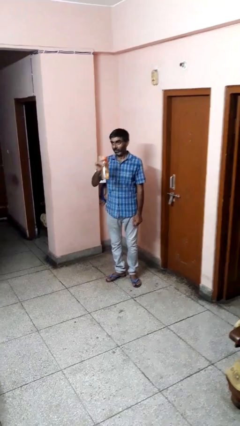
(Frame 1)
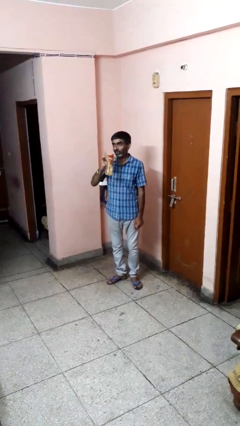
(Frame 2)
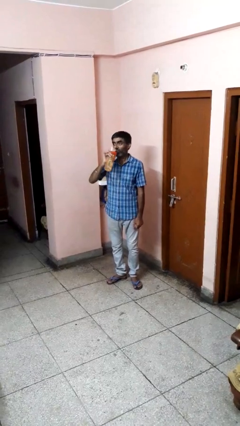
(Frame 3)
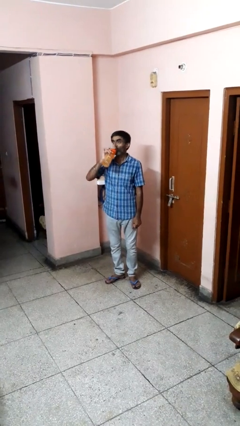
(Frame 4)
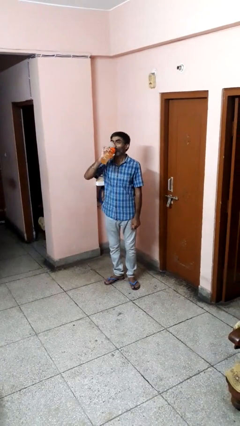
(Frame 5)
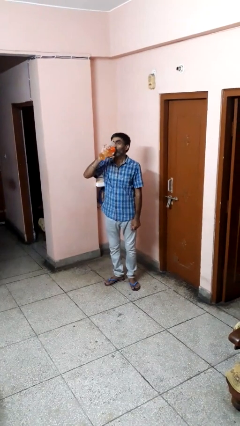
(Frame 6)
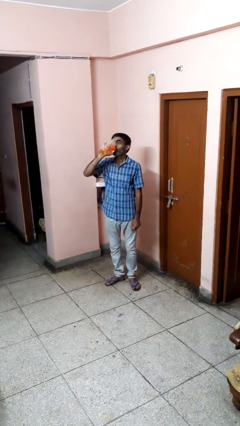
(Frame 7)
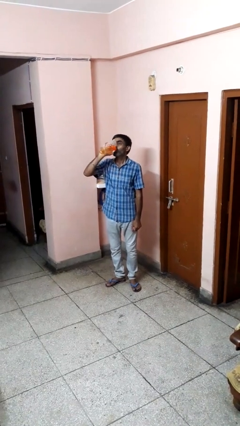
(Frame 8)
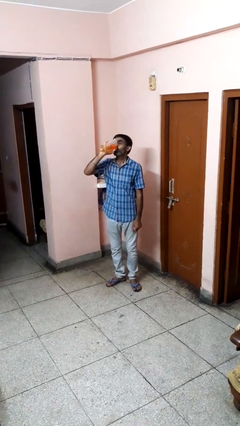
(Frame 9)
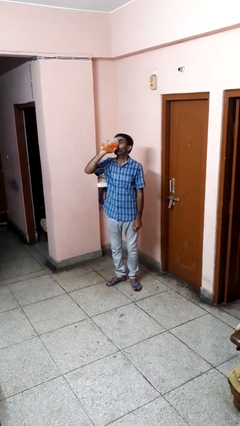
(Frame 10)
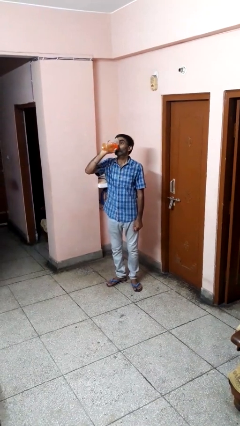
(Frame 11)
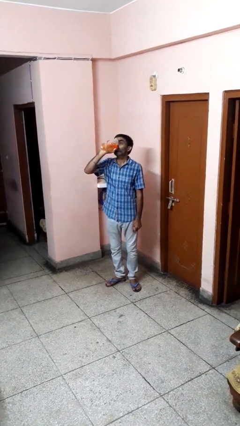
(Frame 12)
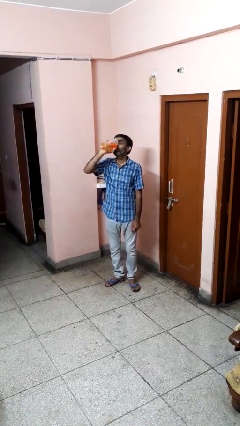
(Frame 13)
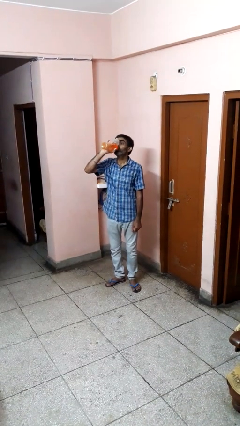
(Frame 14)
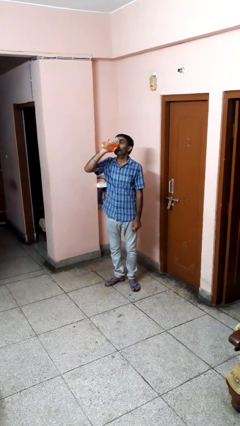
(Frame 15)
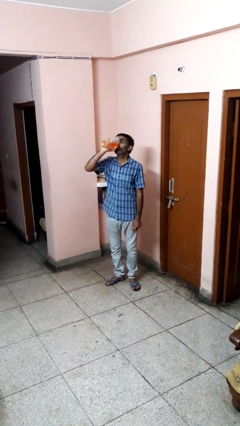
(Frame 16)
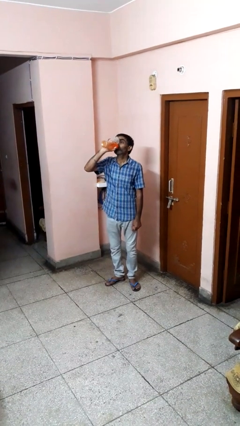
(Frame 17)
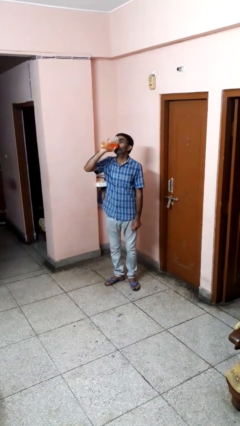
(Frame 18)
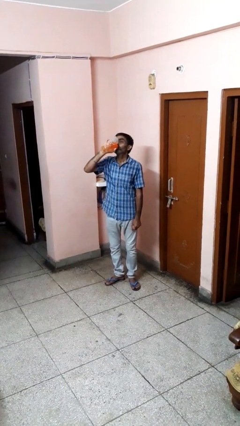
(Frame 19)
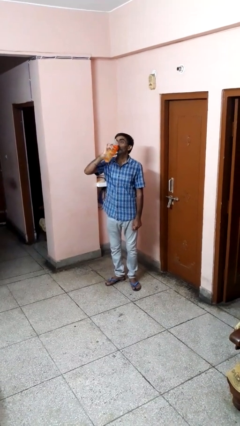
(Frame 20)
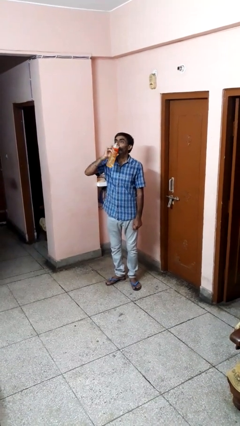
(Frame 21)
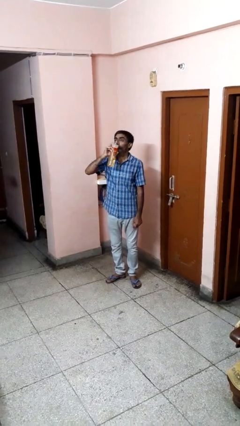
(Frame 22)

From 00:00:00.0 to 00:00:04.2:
person drinks from bottle

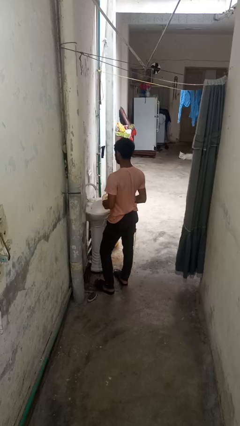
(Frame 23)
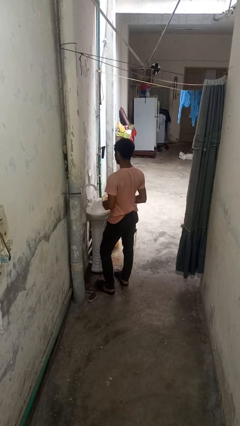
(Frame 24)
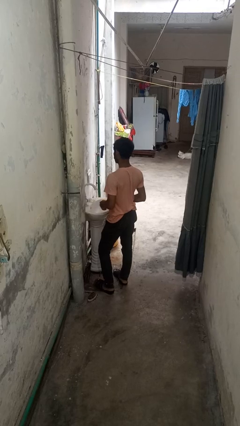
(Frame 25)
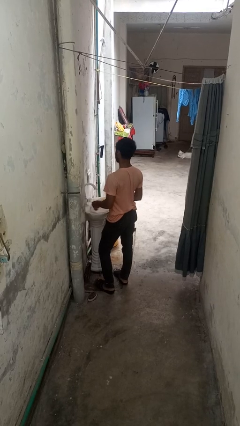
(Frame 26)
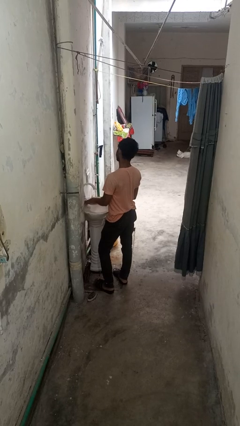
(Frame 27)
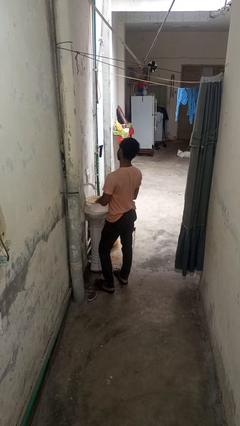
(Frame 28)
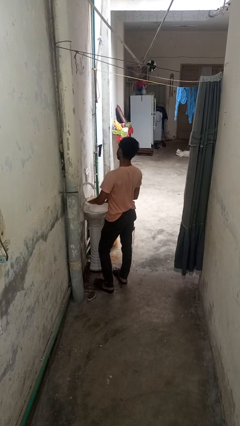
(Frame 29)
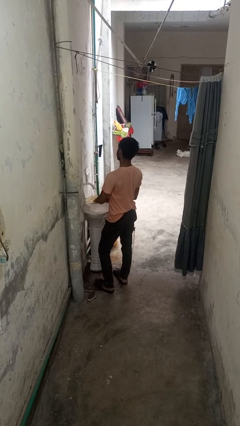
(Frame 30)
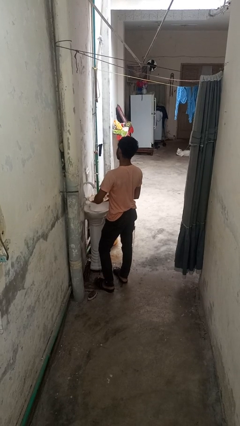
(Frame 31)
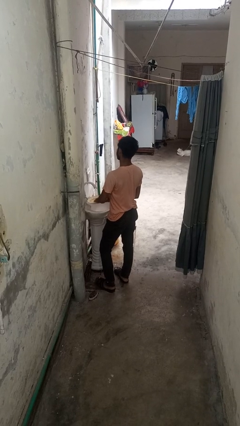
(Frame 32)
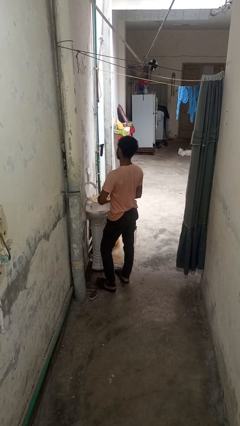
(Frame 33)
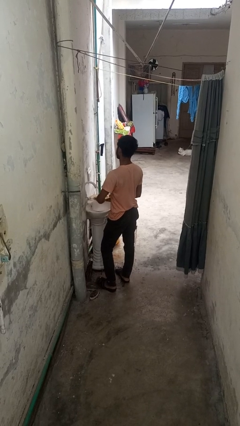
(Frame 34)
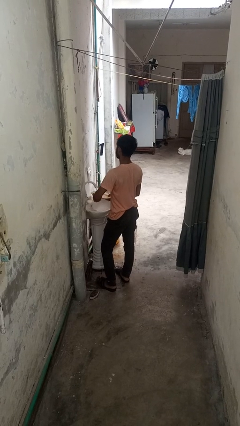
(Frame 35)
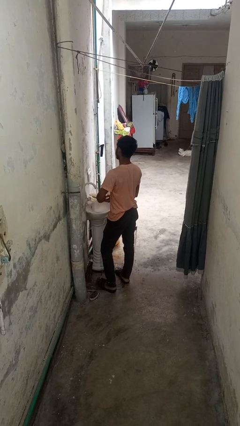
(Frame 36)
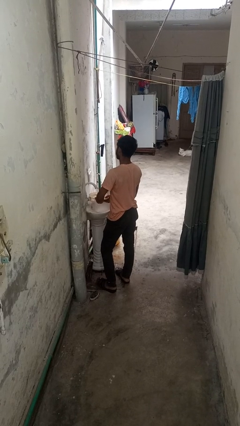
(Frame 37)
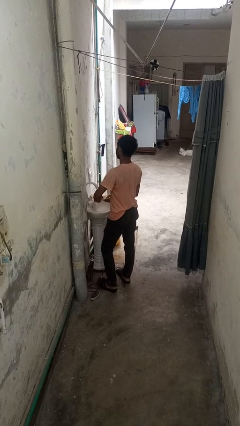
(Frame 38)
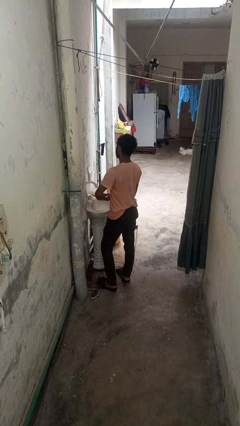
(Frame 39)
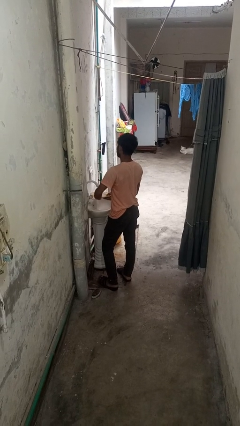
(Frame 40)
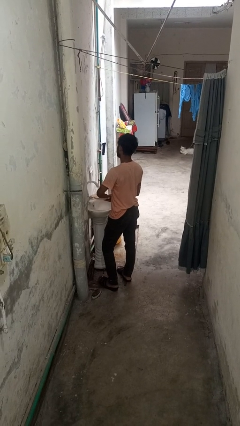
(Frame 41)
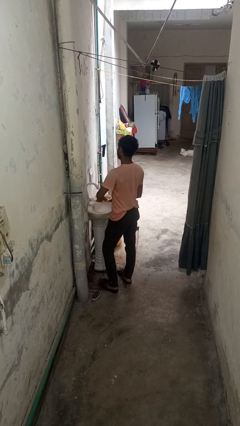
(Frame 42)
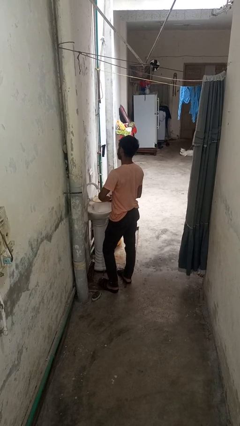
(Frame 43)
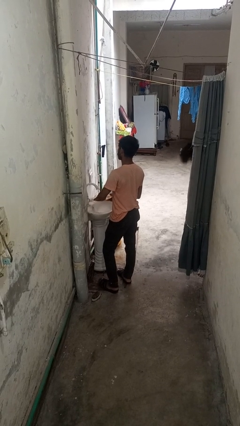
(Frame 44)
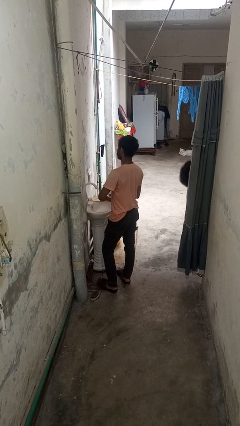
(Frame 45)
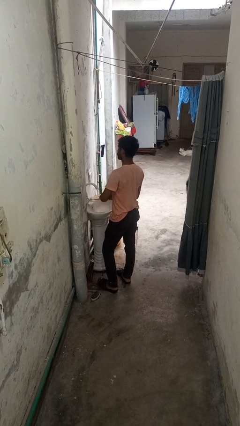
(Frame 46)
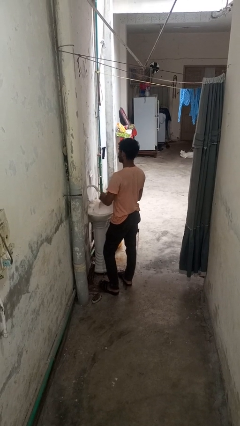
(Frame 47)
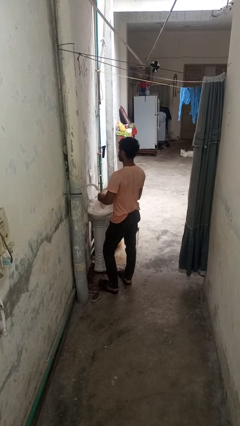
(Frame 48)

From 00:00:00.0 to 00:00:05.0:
person washes dish

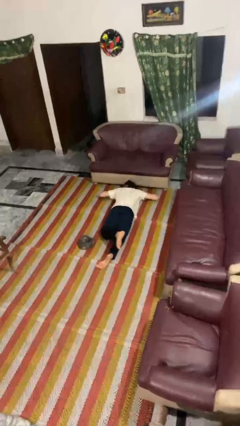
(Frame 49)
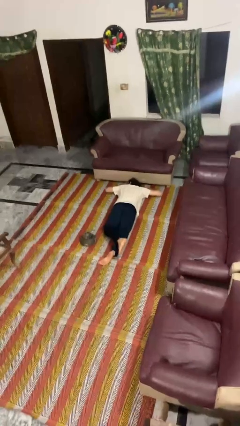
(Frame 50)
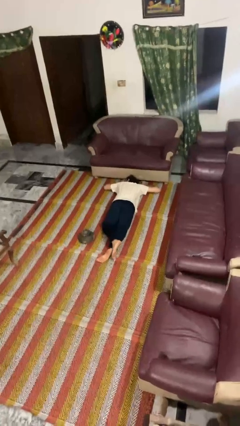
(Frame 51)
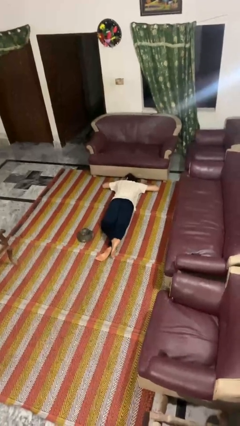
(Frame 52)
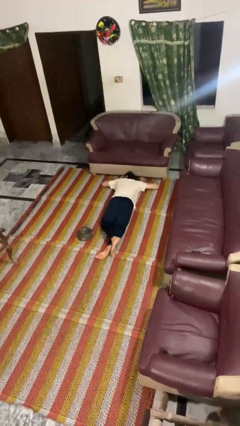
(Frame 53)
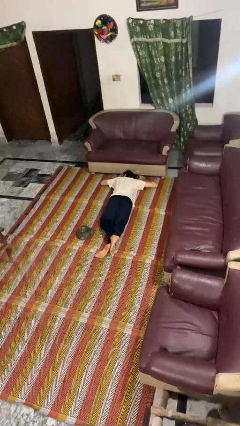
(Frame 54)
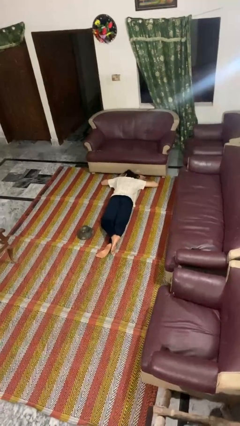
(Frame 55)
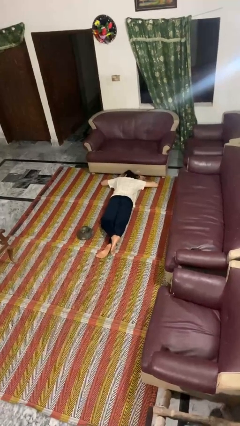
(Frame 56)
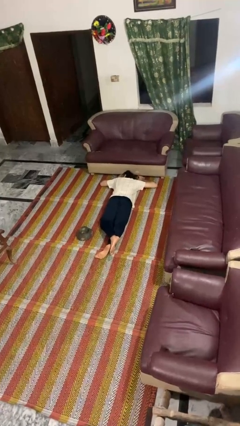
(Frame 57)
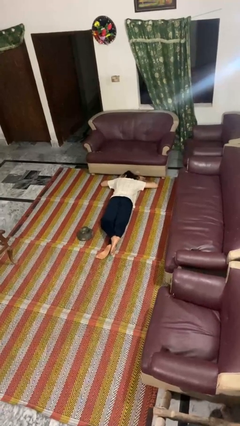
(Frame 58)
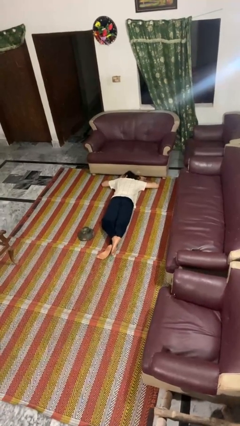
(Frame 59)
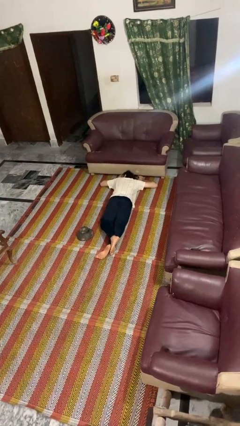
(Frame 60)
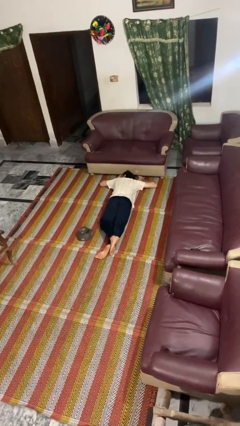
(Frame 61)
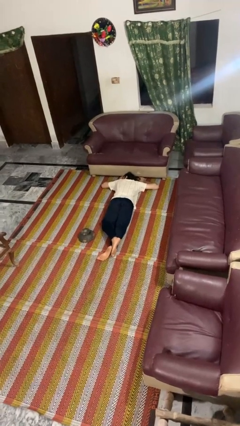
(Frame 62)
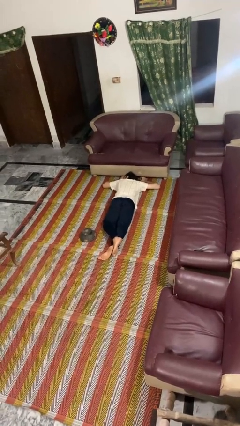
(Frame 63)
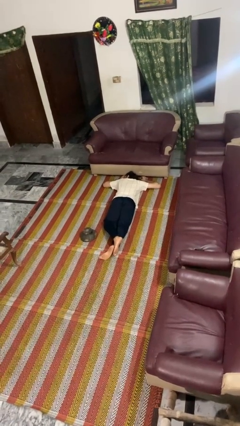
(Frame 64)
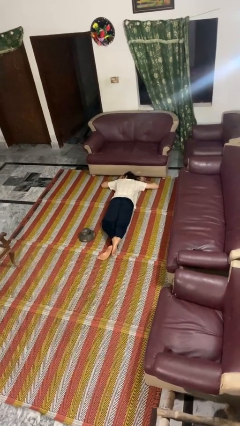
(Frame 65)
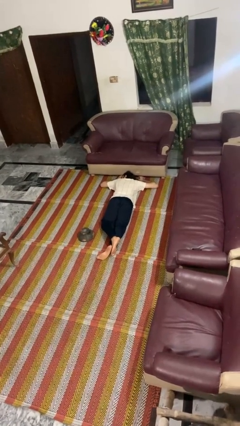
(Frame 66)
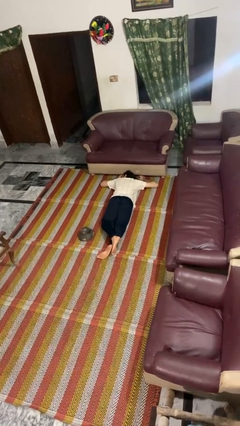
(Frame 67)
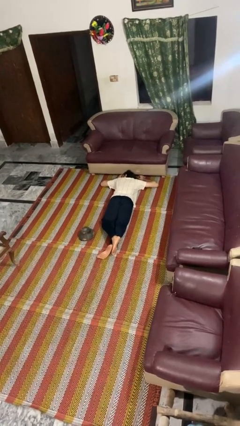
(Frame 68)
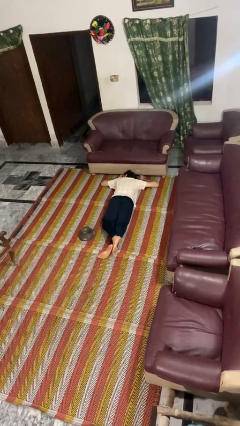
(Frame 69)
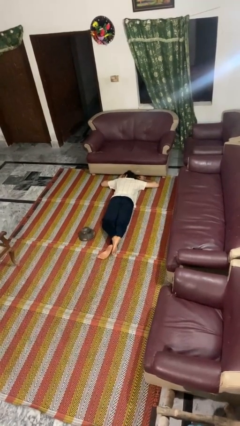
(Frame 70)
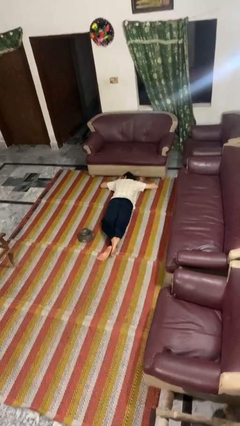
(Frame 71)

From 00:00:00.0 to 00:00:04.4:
person lies down on floor

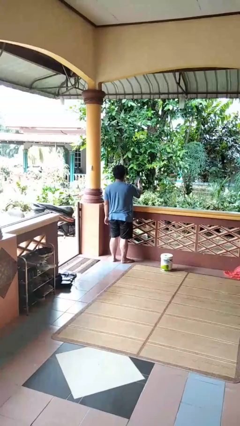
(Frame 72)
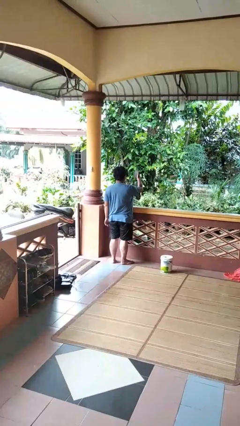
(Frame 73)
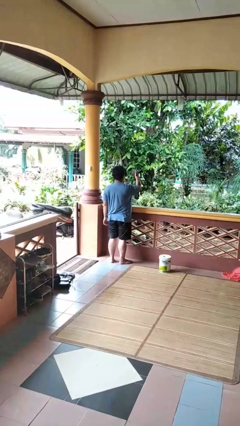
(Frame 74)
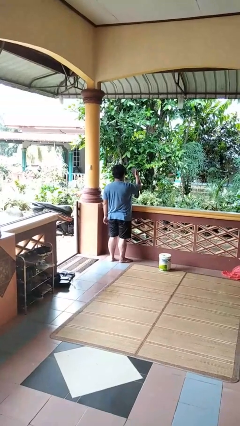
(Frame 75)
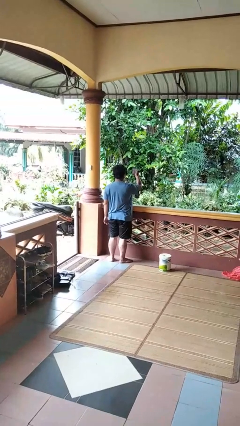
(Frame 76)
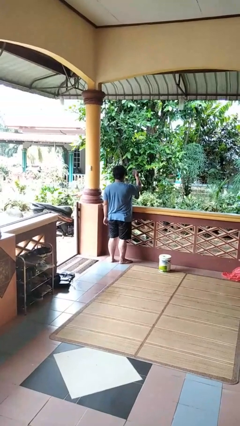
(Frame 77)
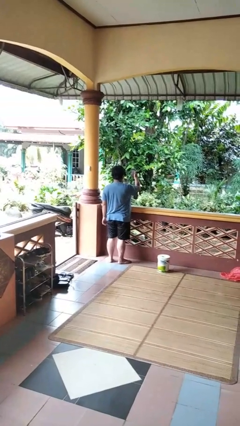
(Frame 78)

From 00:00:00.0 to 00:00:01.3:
person takes selfie

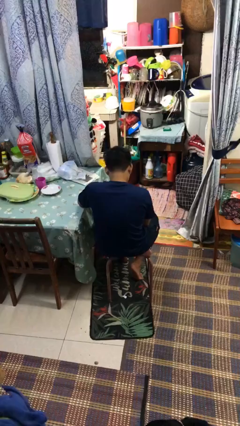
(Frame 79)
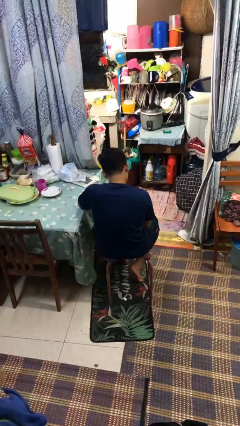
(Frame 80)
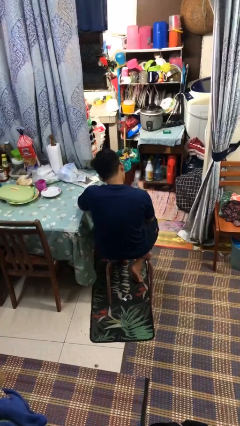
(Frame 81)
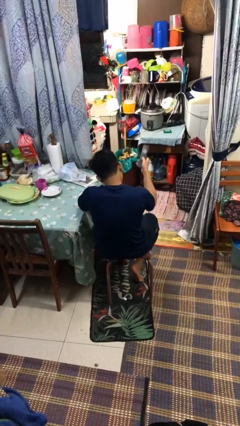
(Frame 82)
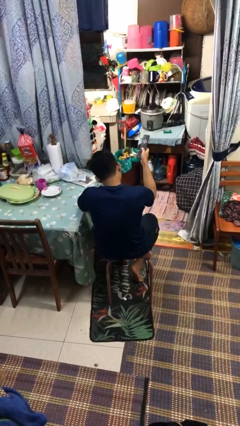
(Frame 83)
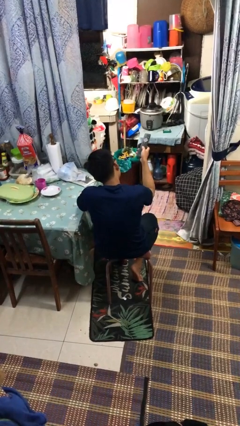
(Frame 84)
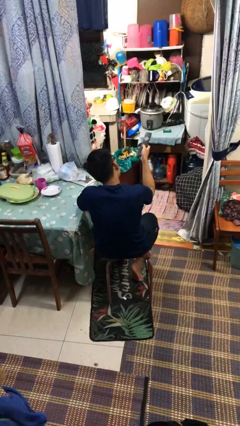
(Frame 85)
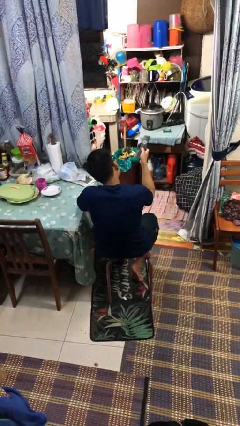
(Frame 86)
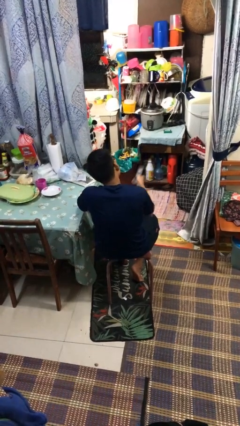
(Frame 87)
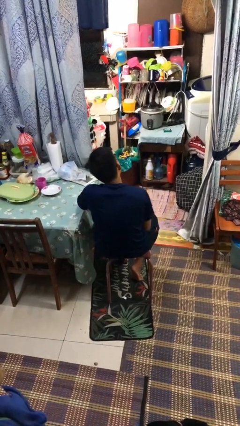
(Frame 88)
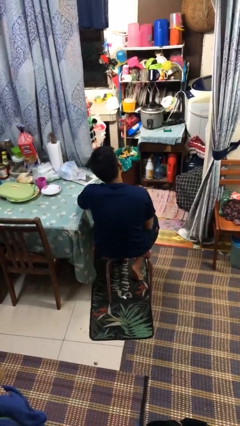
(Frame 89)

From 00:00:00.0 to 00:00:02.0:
person uses television remote

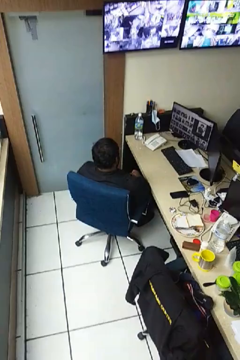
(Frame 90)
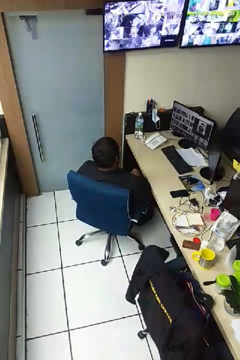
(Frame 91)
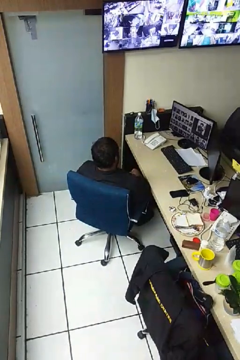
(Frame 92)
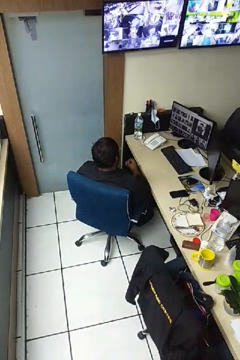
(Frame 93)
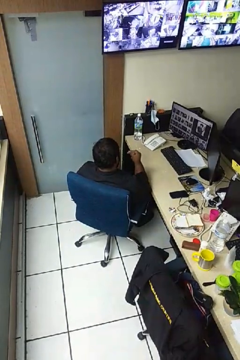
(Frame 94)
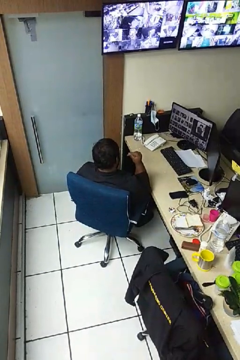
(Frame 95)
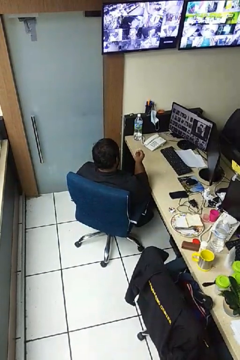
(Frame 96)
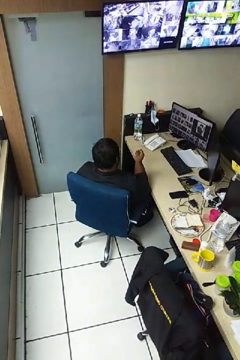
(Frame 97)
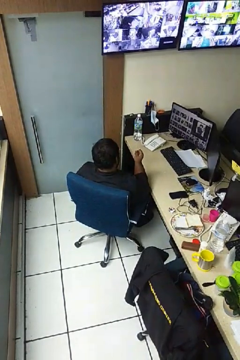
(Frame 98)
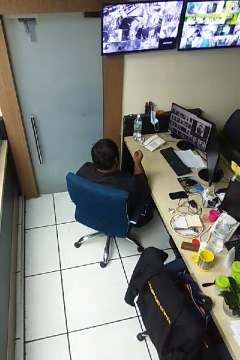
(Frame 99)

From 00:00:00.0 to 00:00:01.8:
person snaps fingers
